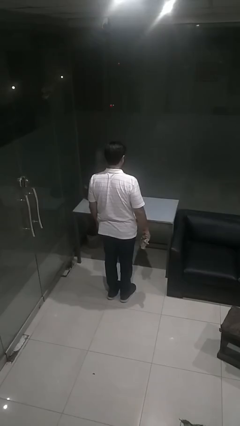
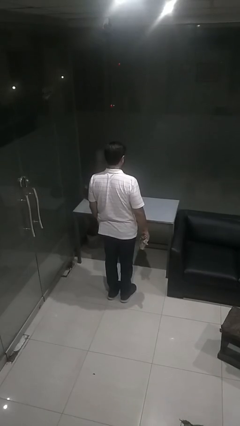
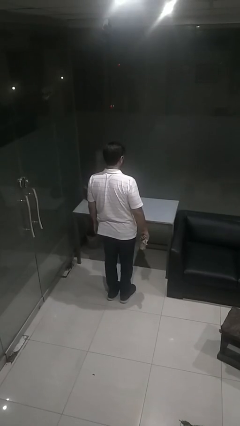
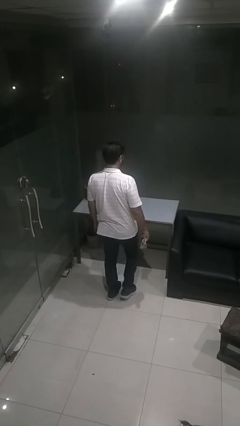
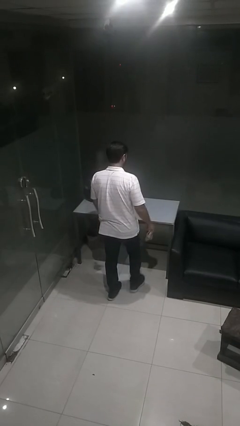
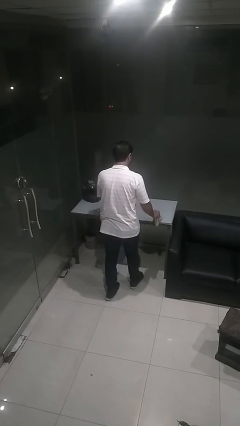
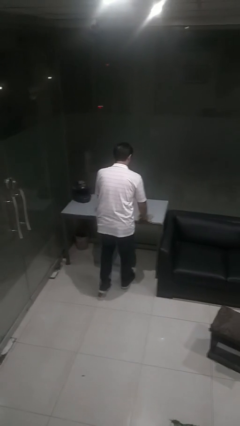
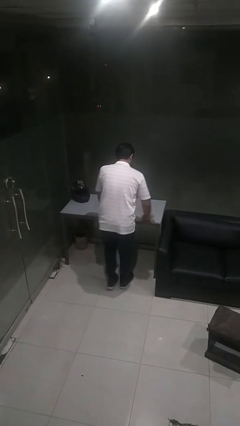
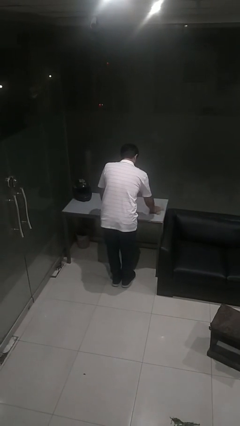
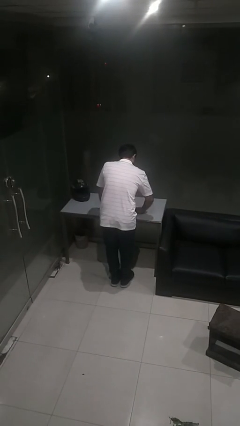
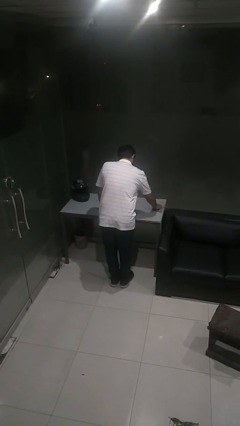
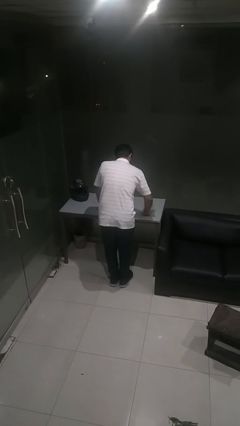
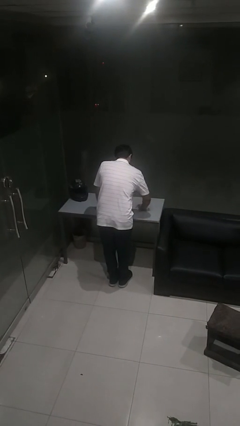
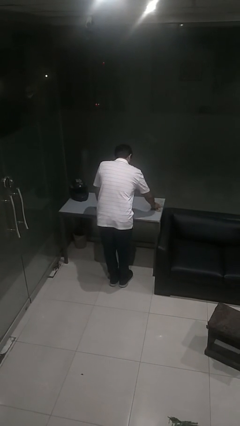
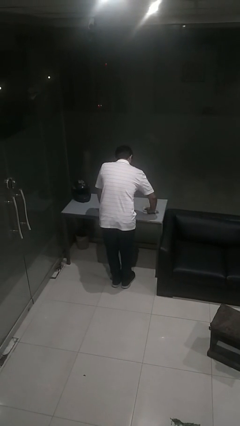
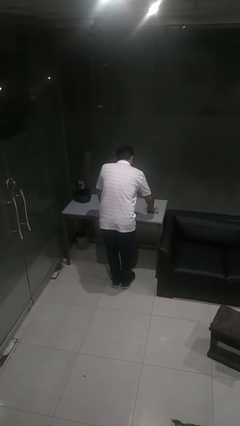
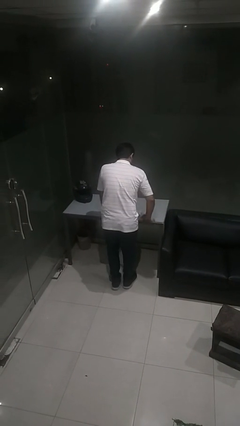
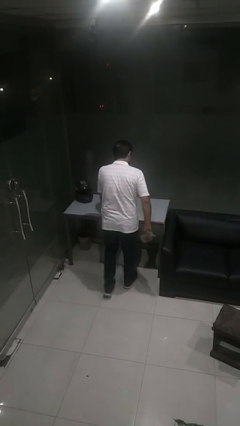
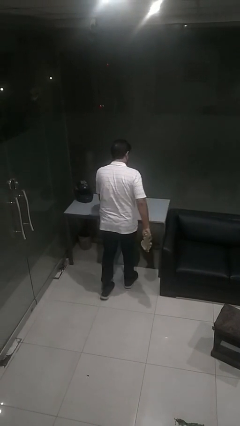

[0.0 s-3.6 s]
person cleans table with rag

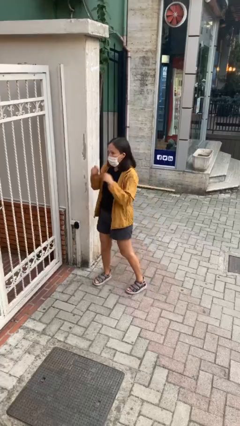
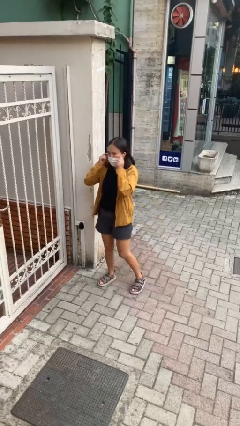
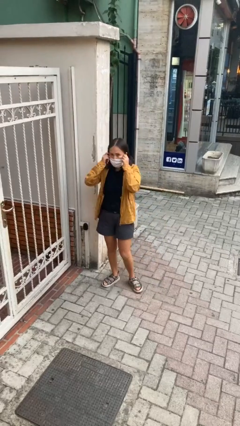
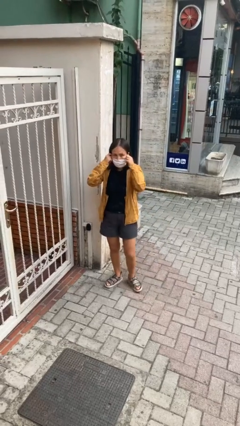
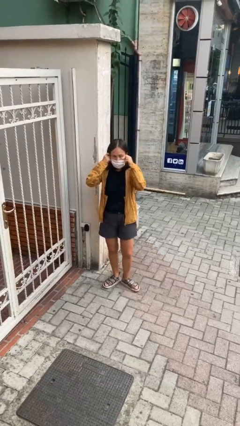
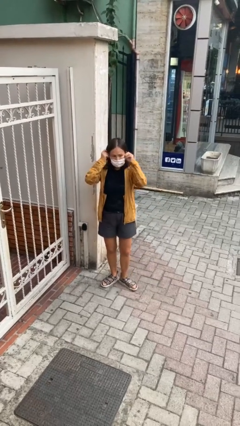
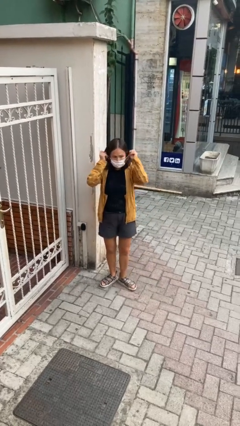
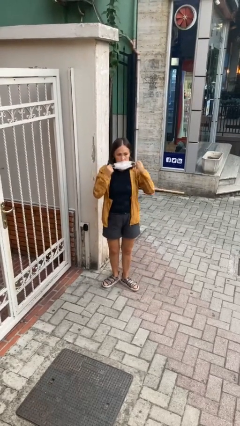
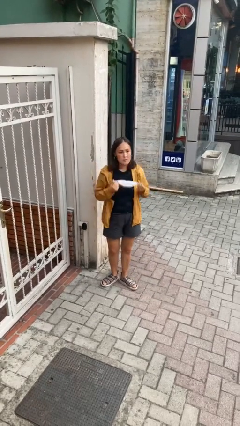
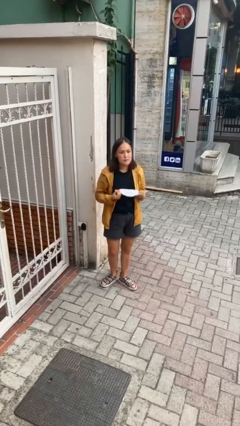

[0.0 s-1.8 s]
person takes off facemask

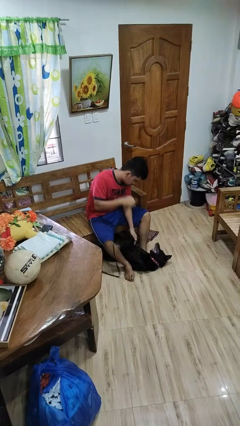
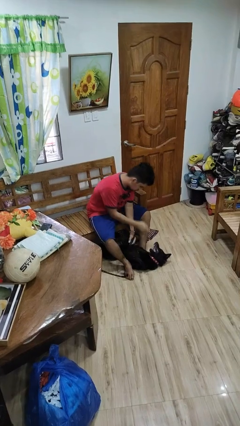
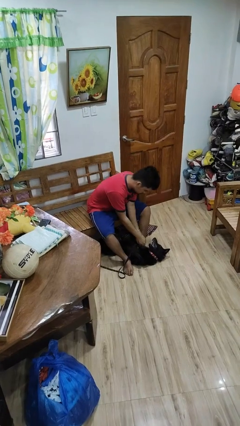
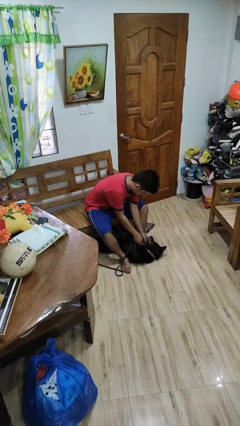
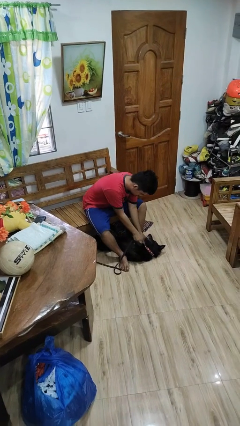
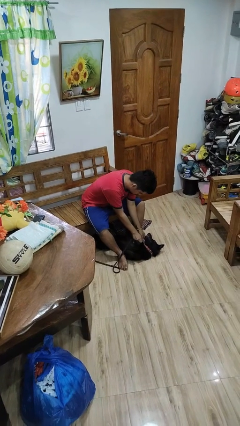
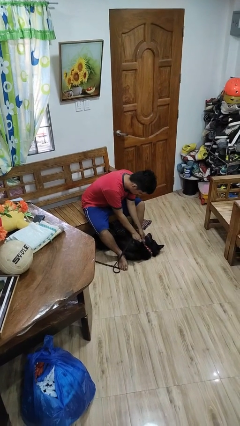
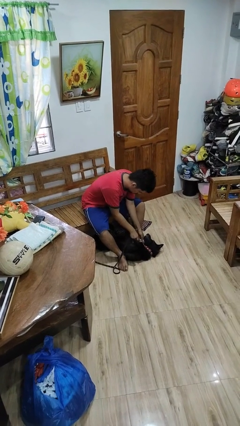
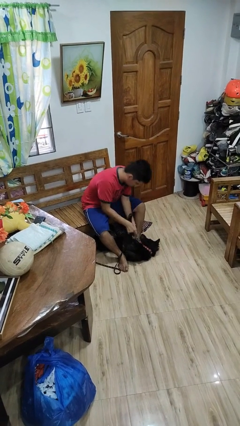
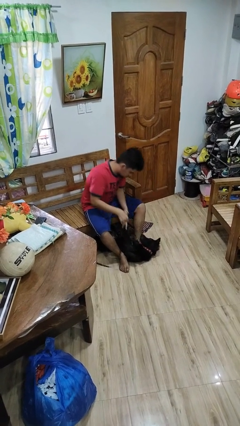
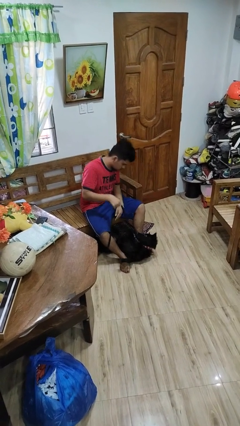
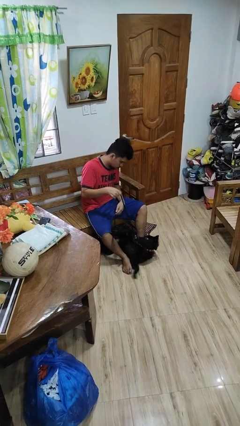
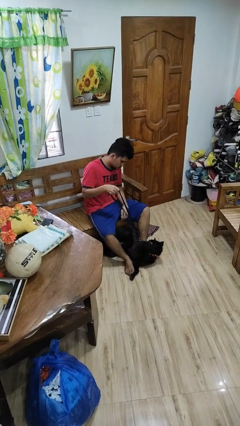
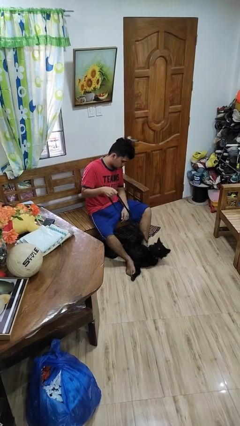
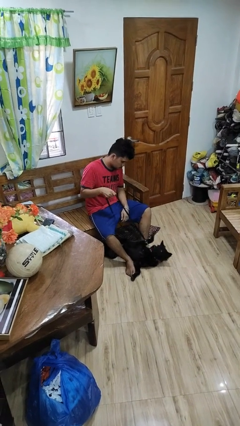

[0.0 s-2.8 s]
person attaches leash to dog

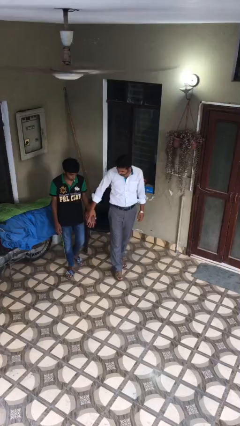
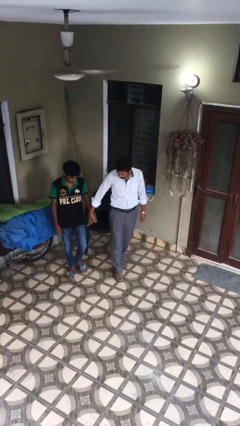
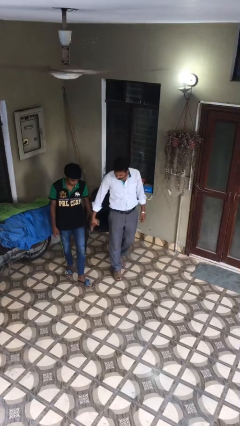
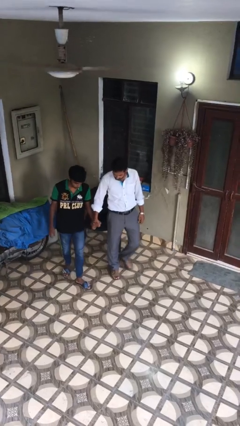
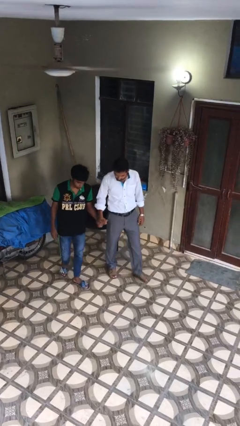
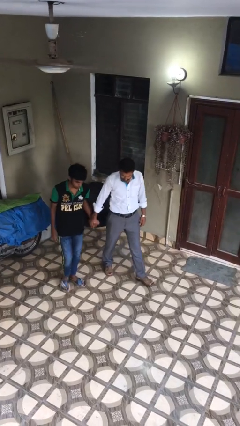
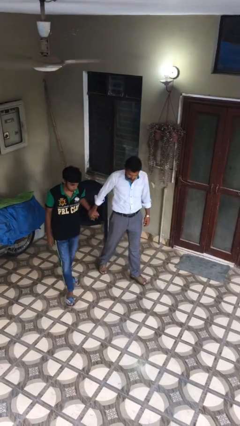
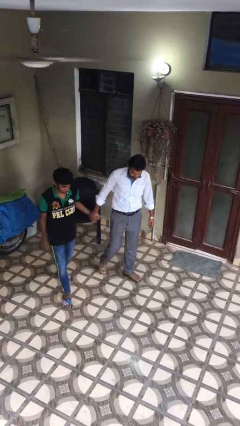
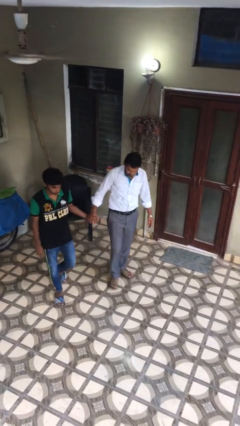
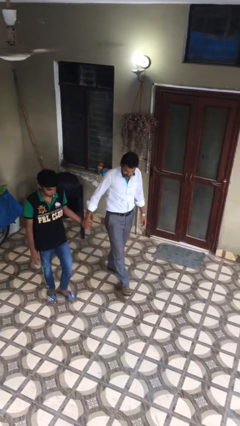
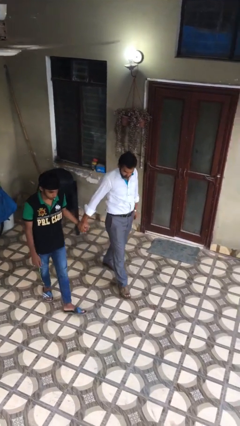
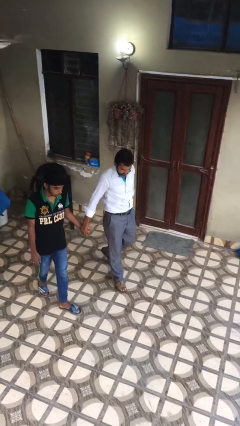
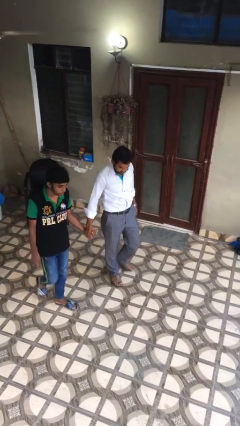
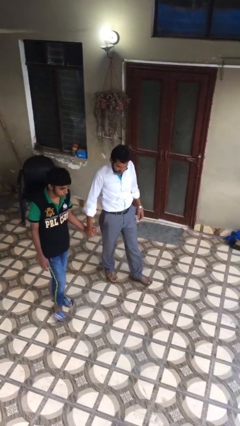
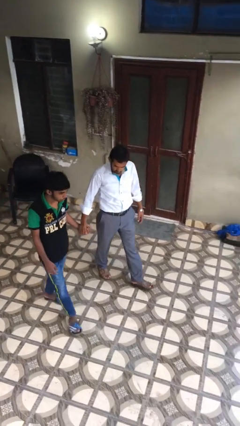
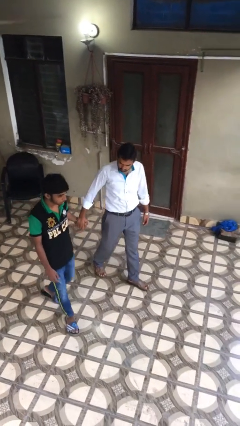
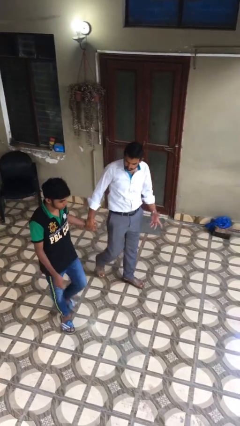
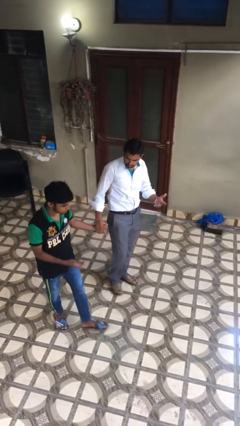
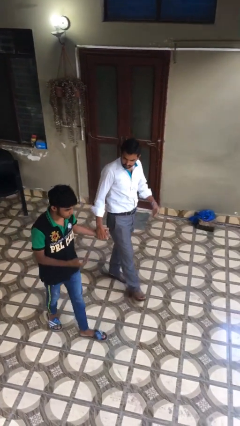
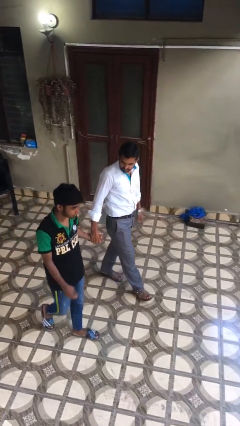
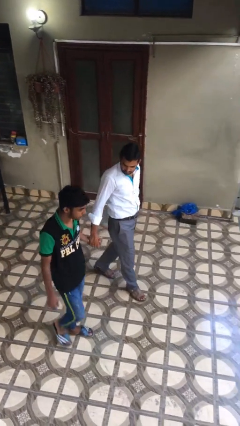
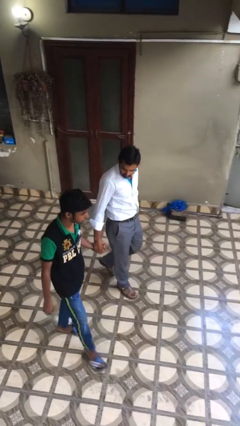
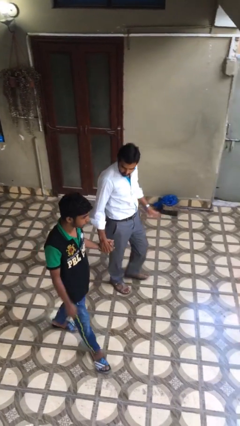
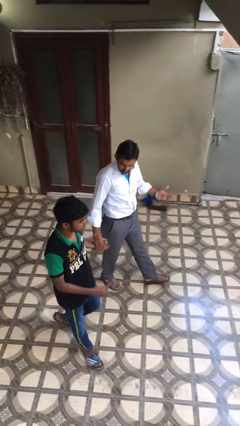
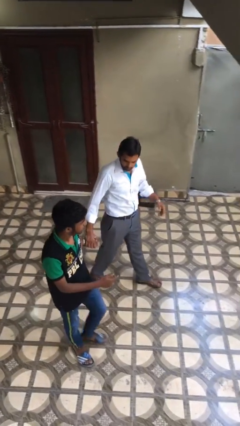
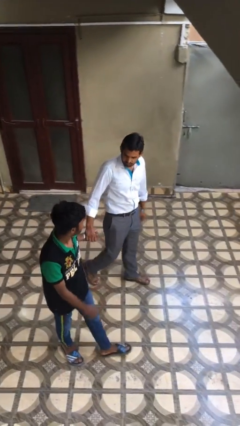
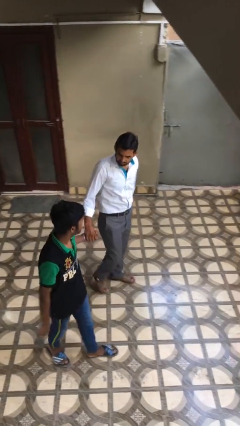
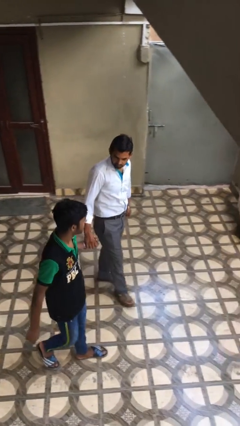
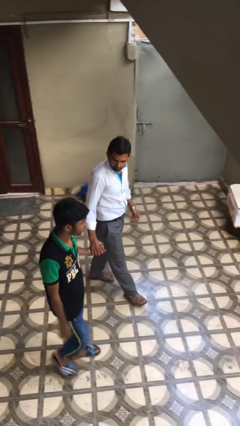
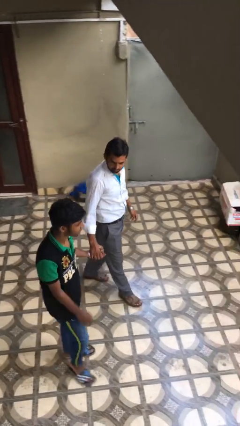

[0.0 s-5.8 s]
person holds hand

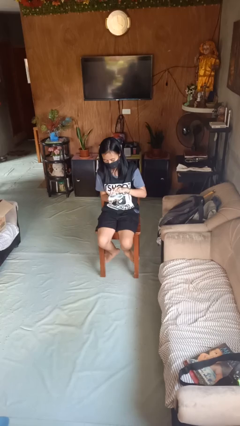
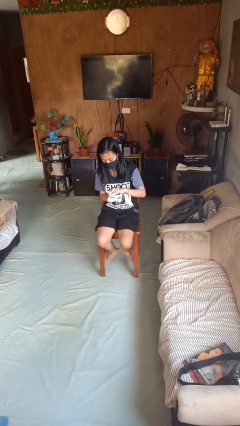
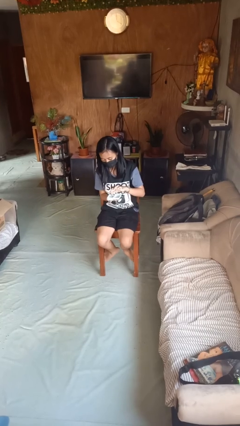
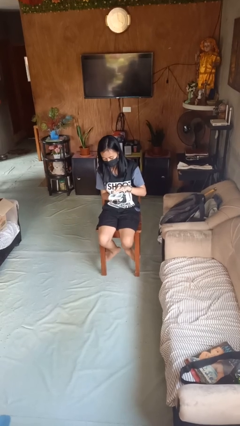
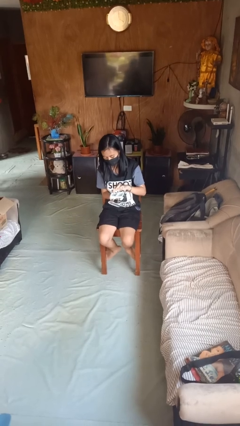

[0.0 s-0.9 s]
person searches jewelry box

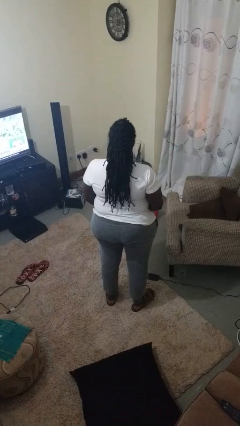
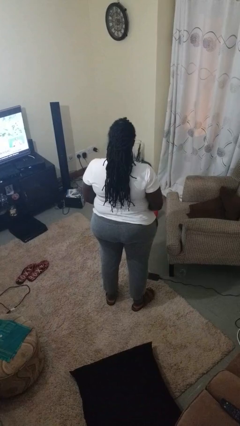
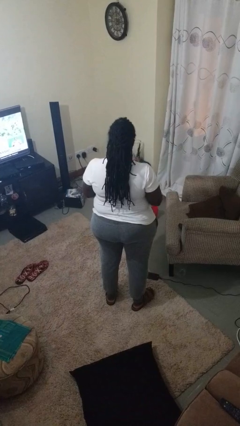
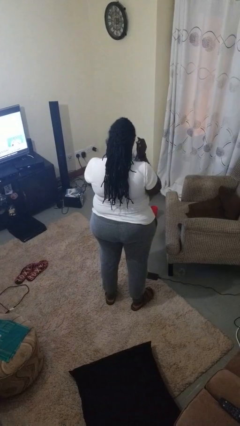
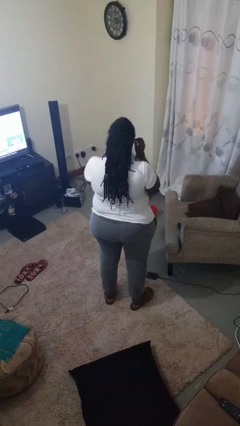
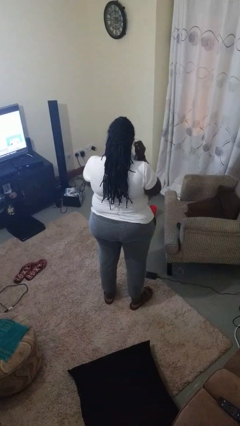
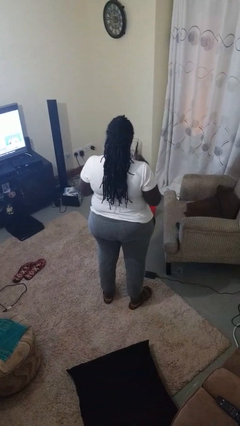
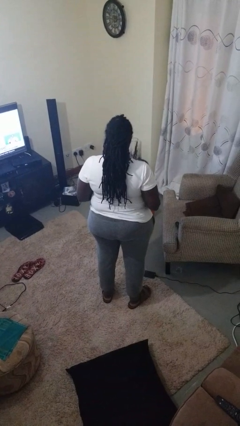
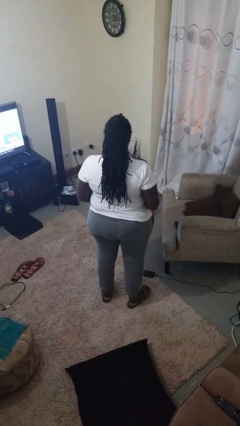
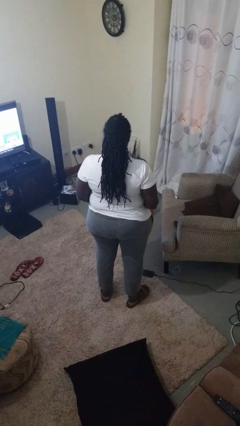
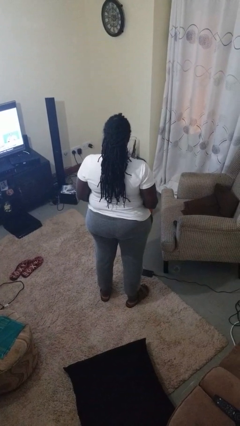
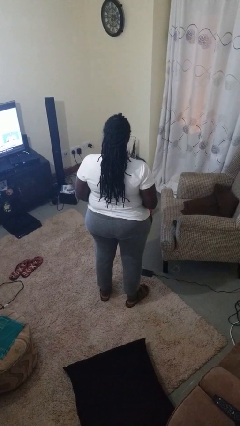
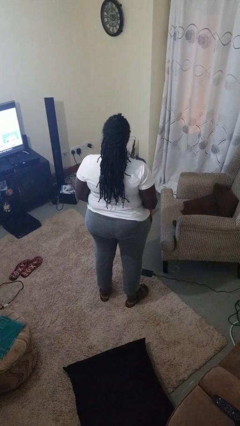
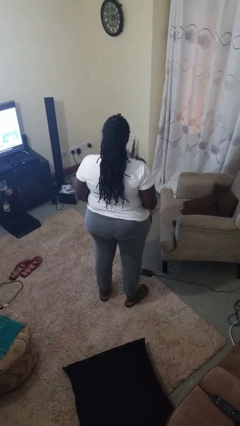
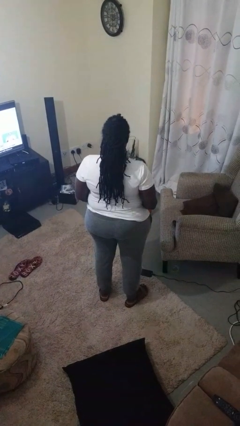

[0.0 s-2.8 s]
person takes off sunglasses
